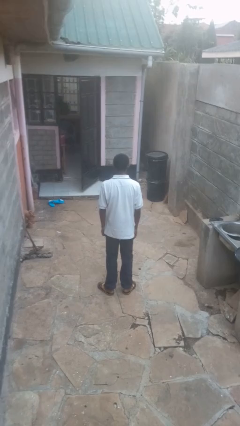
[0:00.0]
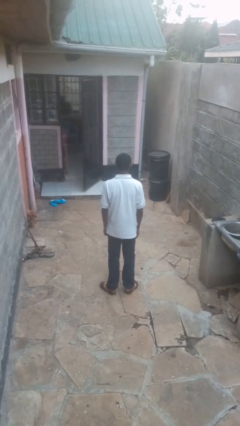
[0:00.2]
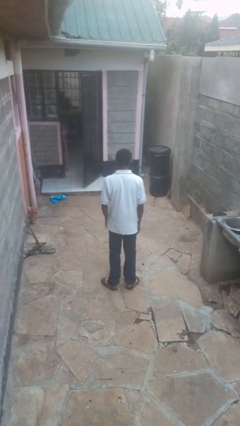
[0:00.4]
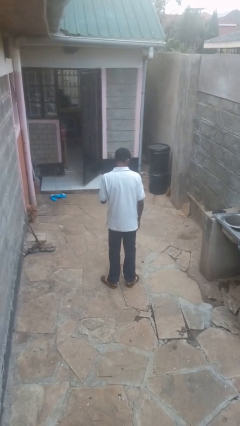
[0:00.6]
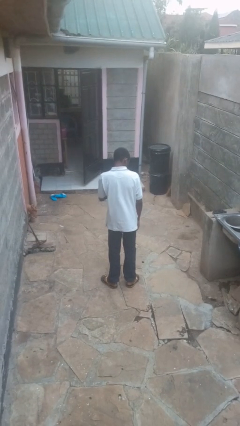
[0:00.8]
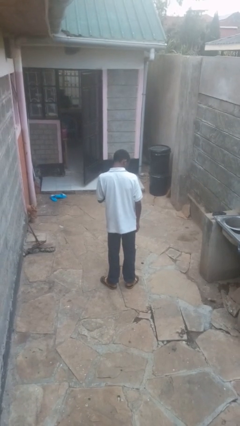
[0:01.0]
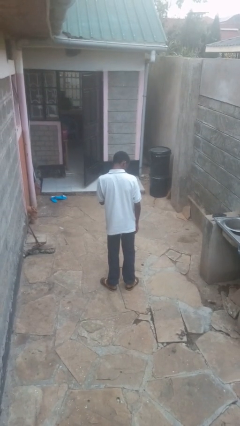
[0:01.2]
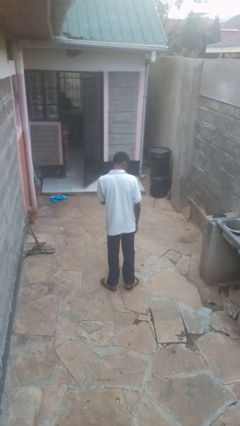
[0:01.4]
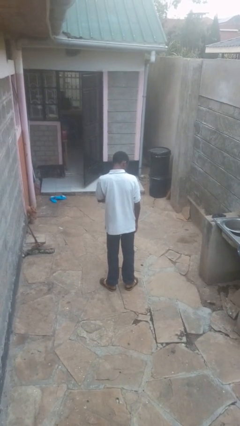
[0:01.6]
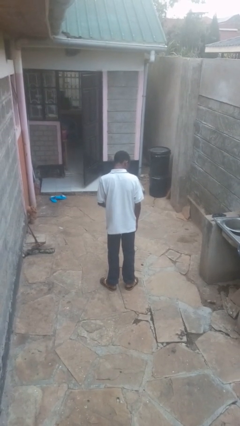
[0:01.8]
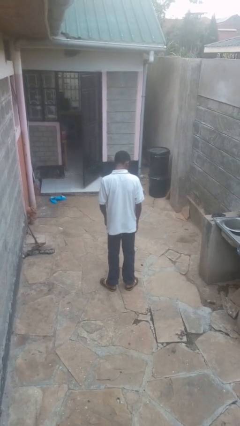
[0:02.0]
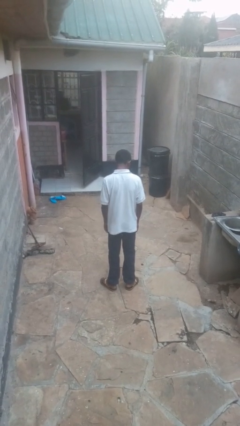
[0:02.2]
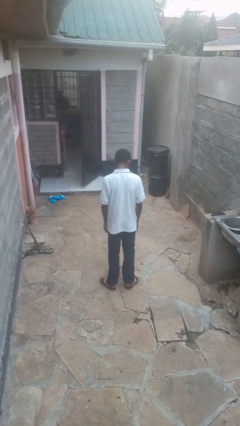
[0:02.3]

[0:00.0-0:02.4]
person swats bug

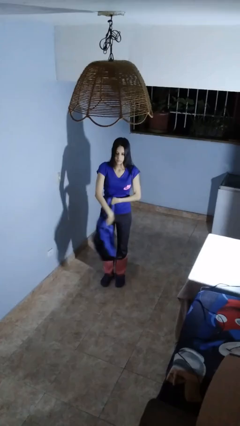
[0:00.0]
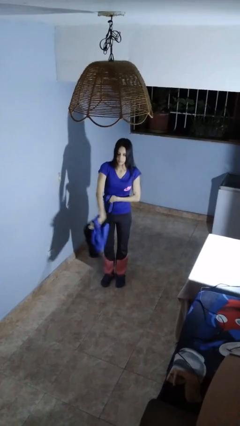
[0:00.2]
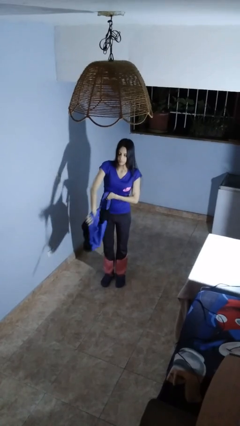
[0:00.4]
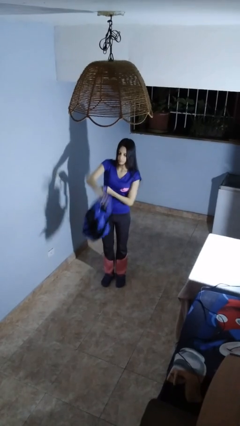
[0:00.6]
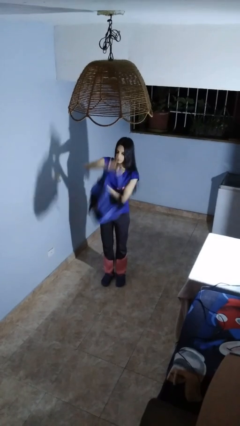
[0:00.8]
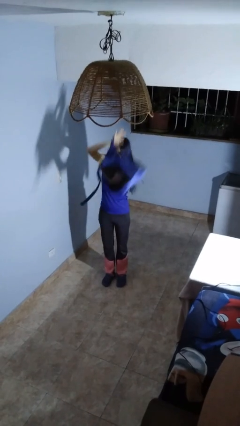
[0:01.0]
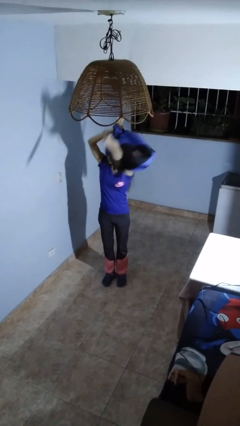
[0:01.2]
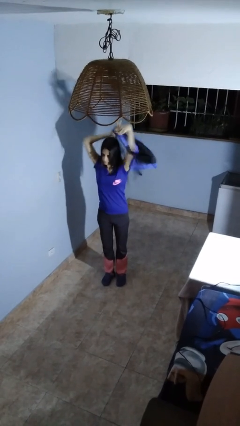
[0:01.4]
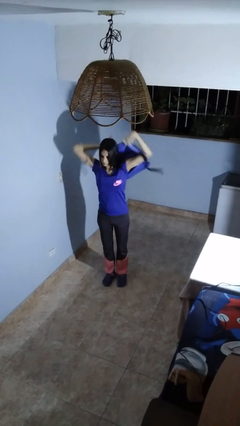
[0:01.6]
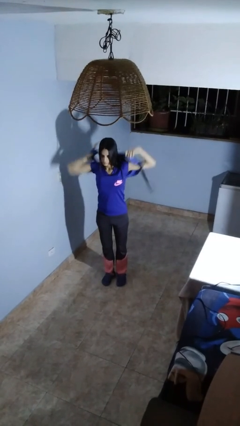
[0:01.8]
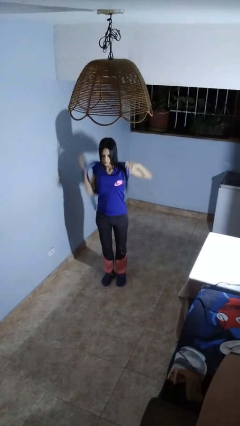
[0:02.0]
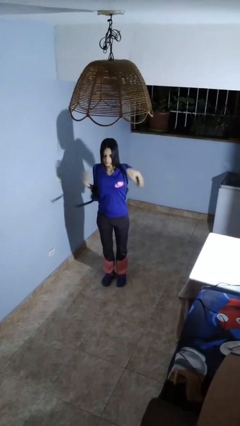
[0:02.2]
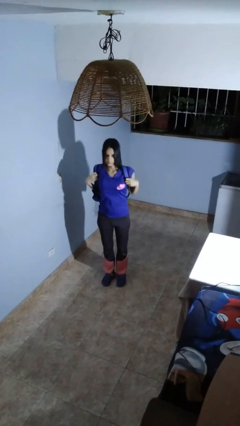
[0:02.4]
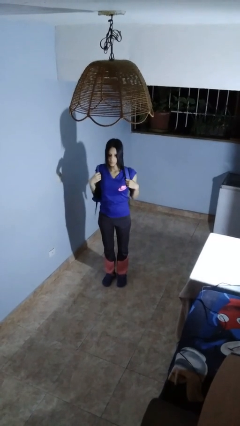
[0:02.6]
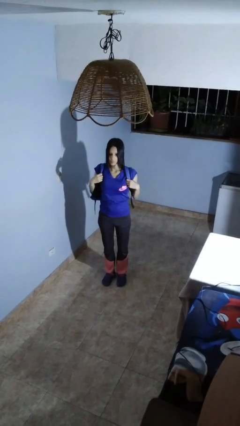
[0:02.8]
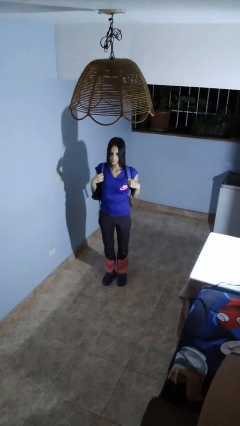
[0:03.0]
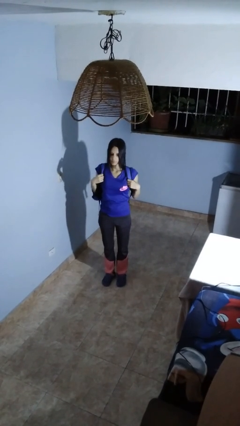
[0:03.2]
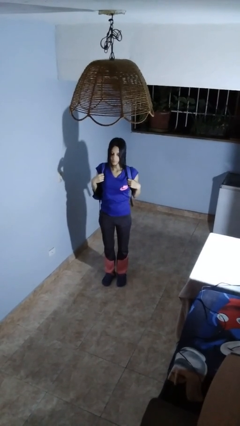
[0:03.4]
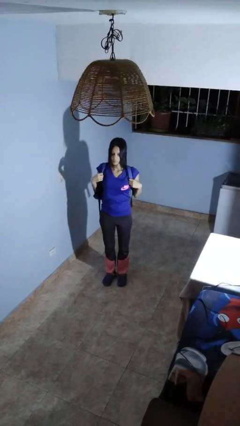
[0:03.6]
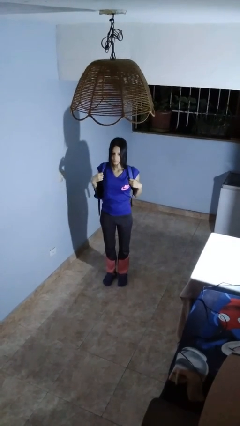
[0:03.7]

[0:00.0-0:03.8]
person puts on backpack

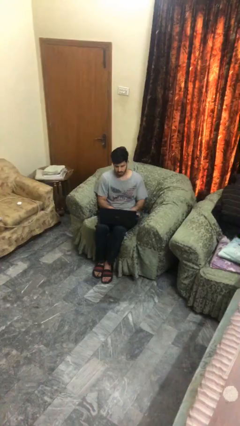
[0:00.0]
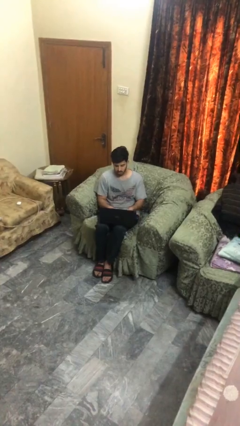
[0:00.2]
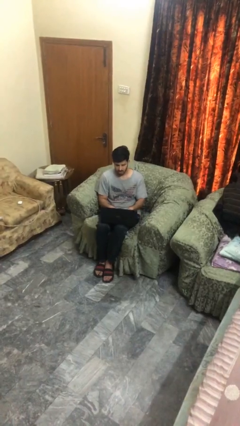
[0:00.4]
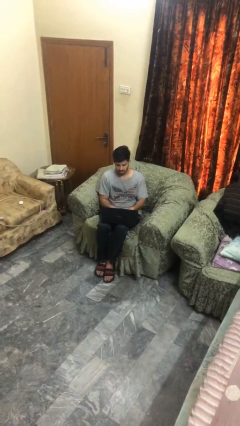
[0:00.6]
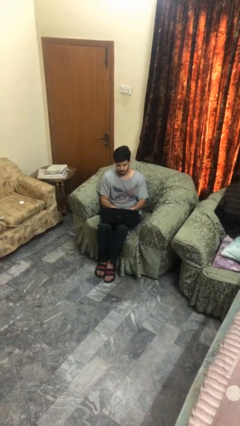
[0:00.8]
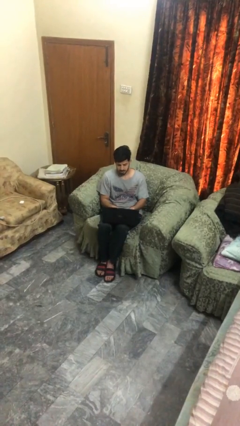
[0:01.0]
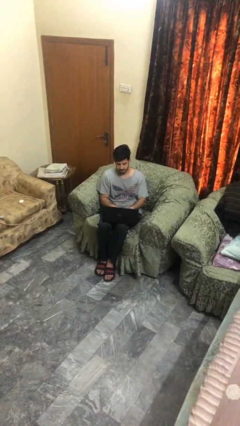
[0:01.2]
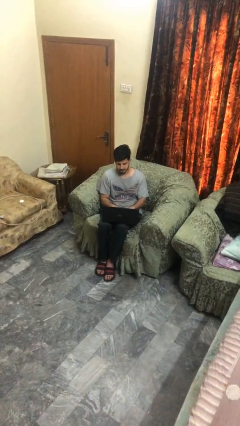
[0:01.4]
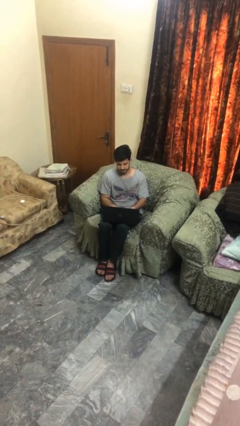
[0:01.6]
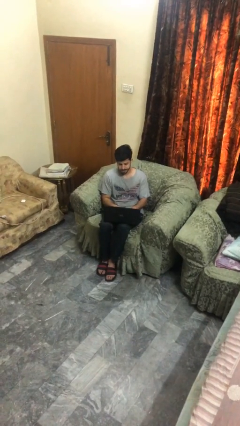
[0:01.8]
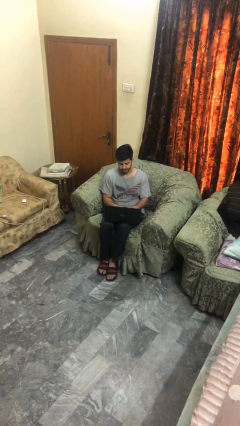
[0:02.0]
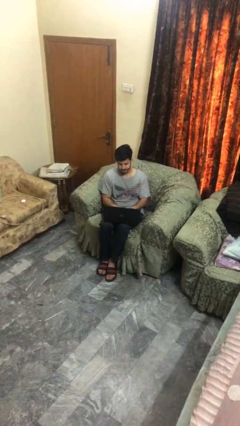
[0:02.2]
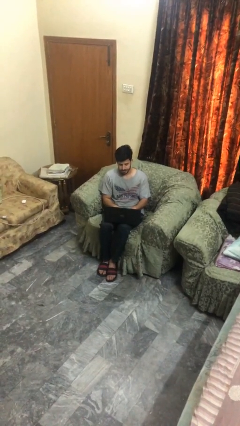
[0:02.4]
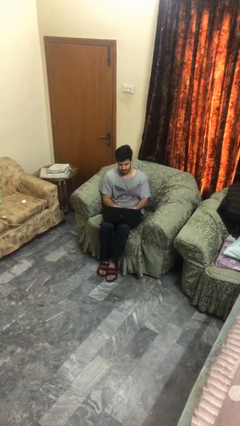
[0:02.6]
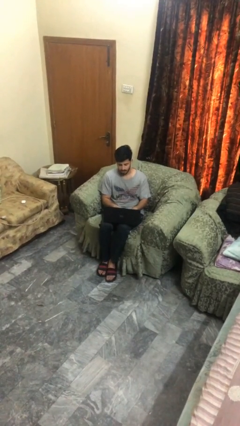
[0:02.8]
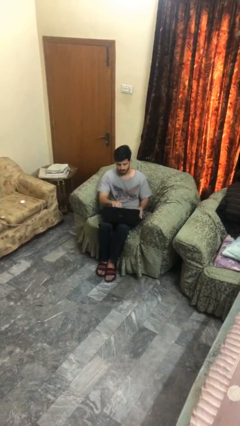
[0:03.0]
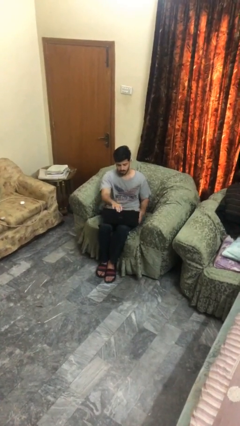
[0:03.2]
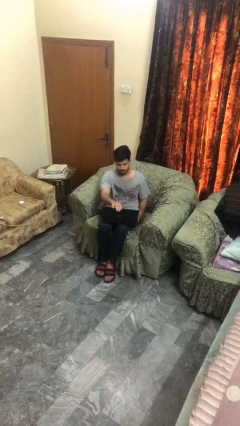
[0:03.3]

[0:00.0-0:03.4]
person interacts with laptop

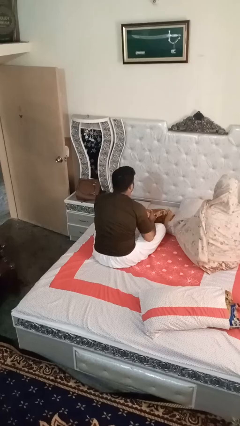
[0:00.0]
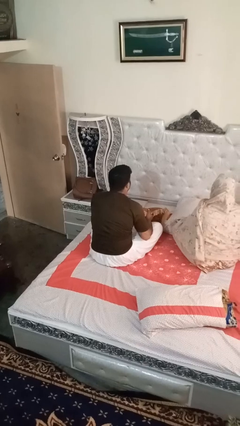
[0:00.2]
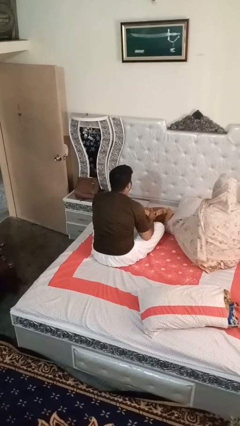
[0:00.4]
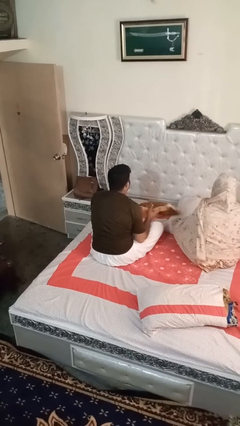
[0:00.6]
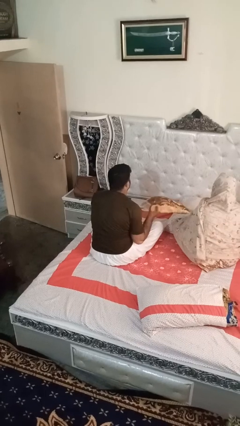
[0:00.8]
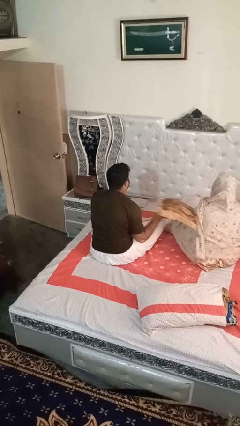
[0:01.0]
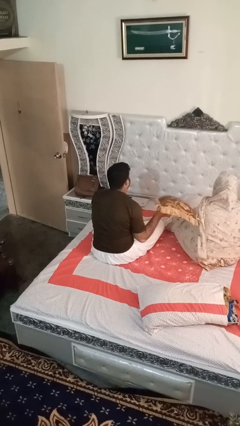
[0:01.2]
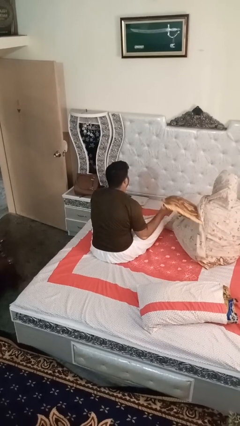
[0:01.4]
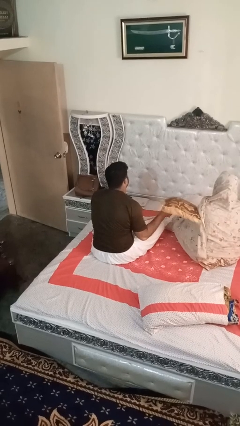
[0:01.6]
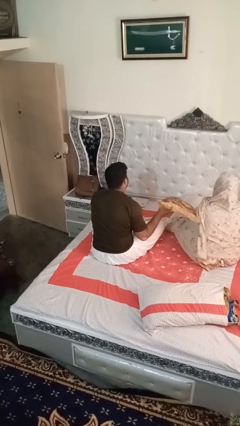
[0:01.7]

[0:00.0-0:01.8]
person hits person with pillow

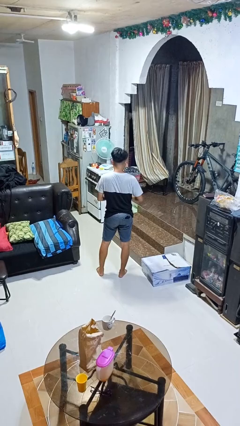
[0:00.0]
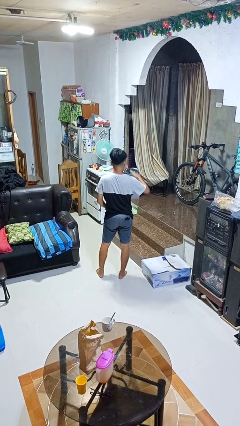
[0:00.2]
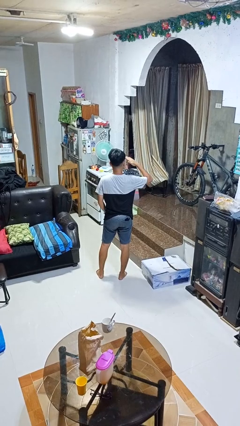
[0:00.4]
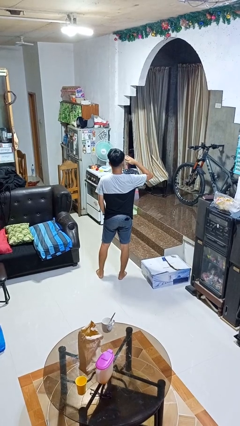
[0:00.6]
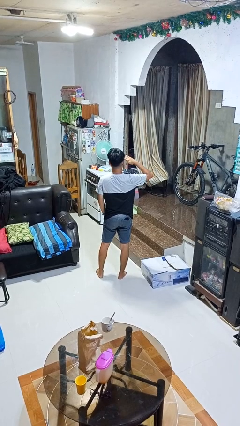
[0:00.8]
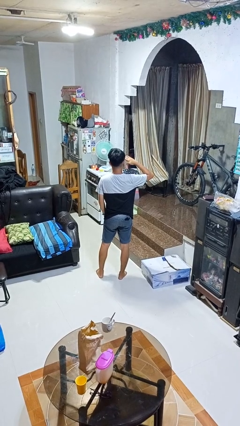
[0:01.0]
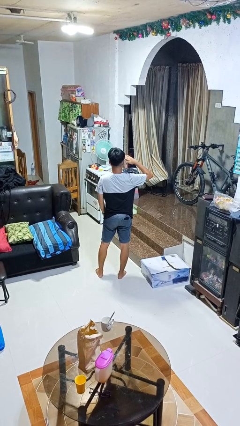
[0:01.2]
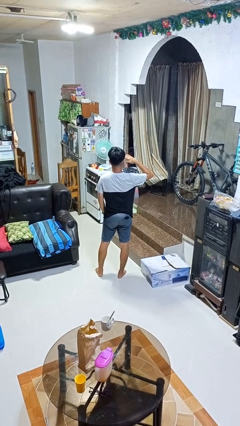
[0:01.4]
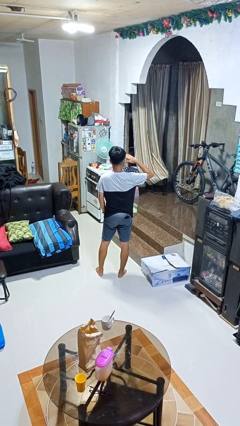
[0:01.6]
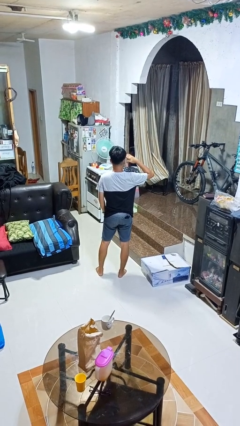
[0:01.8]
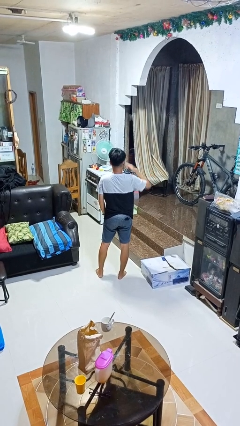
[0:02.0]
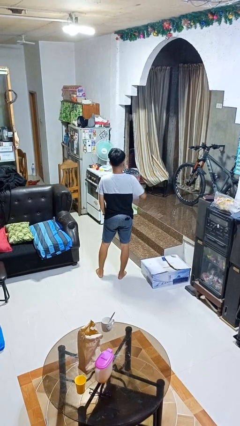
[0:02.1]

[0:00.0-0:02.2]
person salutes

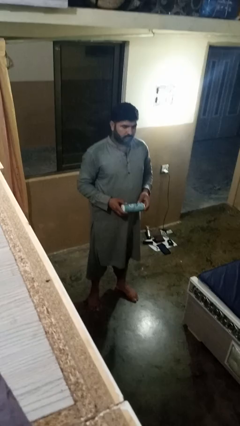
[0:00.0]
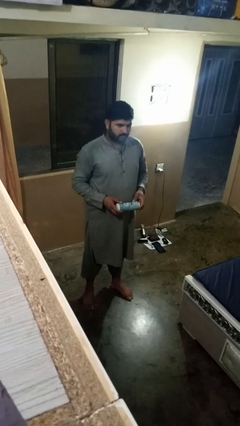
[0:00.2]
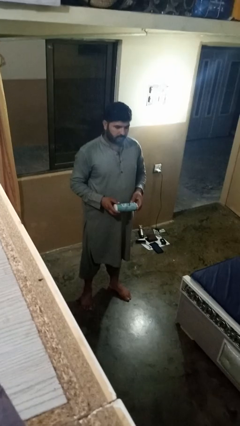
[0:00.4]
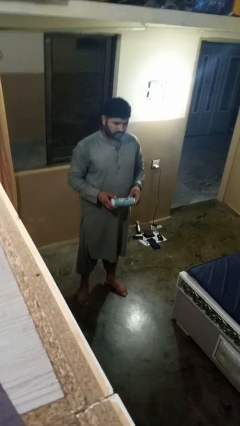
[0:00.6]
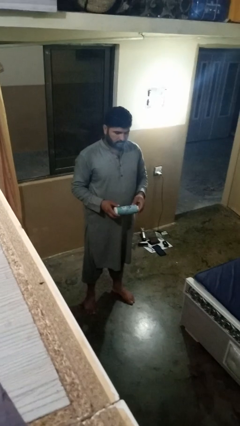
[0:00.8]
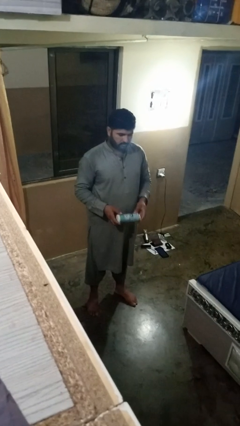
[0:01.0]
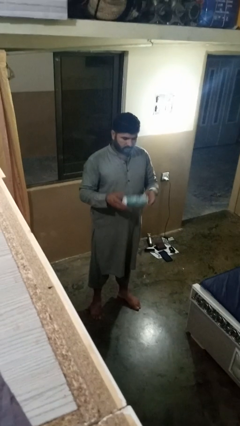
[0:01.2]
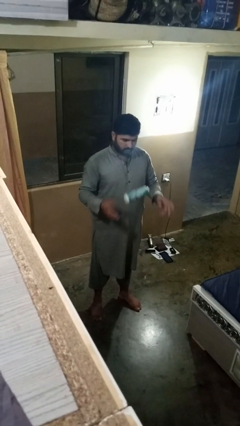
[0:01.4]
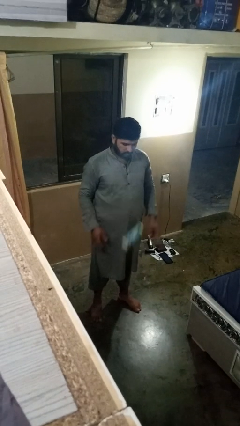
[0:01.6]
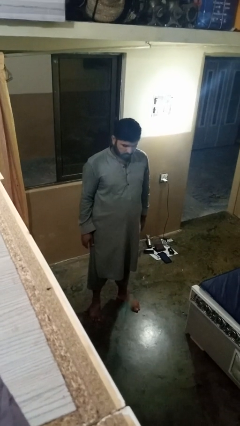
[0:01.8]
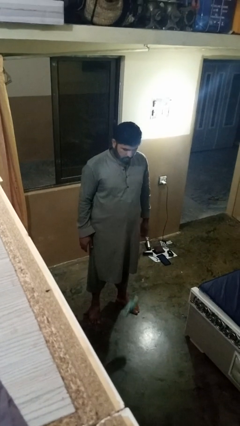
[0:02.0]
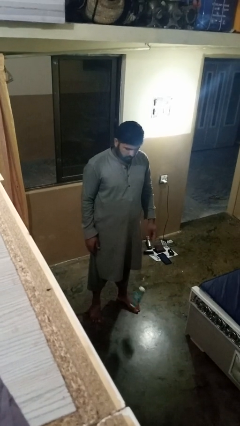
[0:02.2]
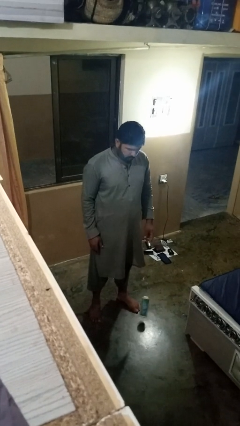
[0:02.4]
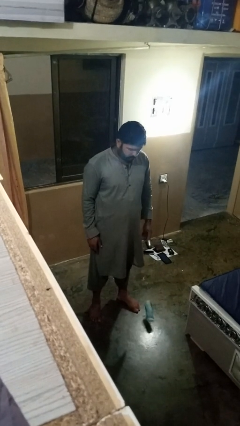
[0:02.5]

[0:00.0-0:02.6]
person throws object into air

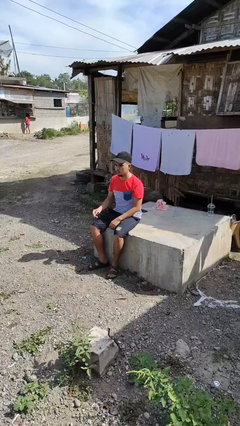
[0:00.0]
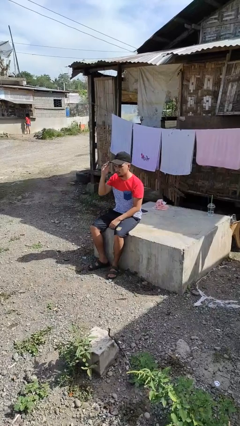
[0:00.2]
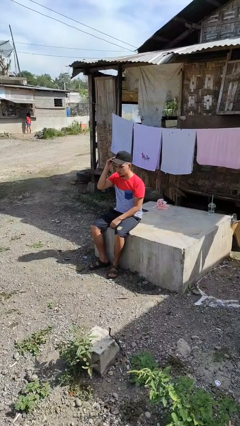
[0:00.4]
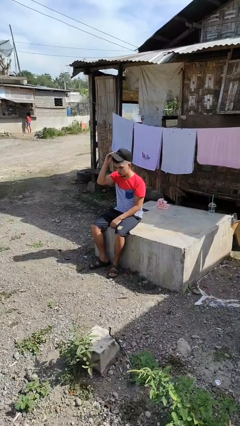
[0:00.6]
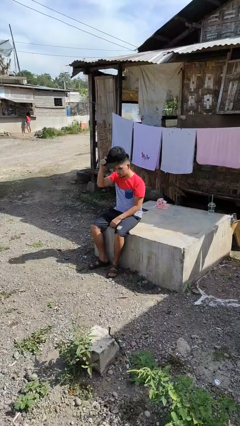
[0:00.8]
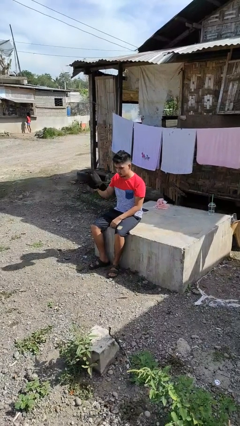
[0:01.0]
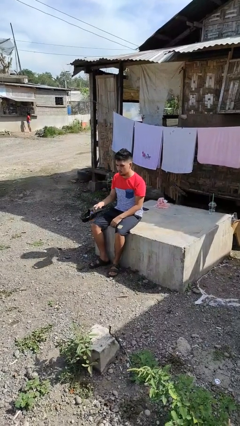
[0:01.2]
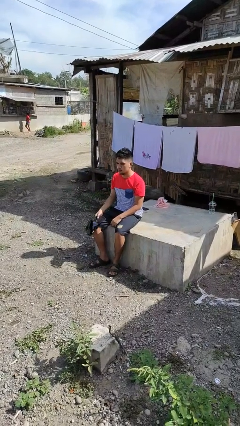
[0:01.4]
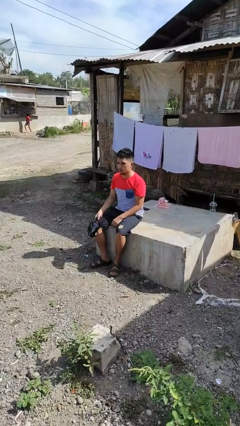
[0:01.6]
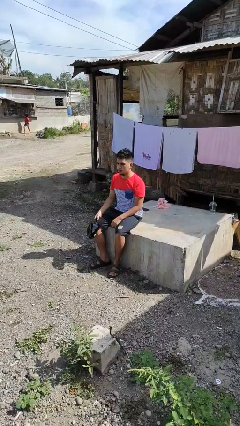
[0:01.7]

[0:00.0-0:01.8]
person takes off hat
